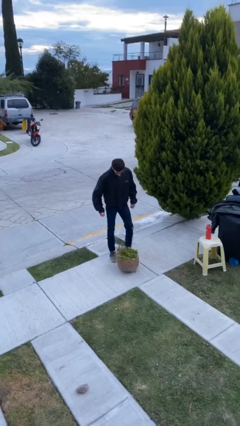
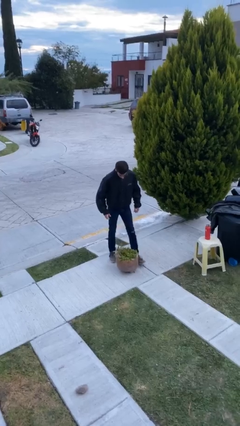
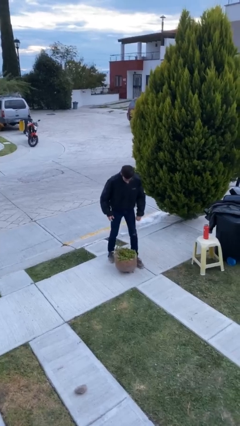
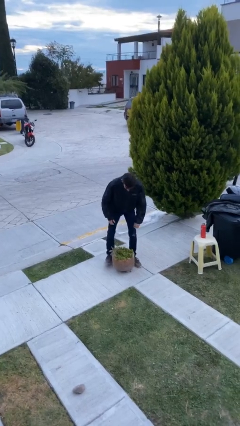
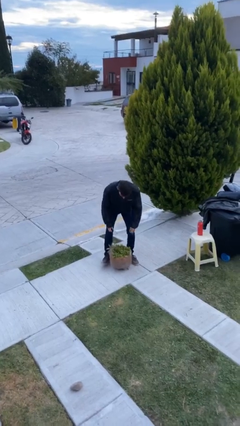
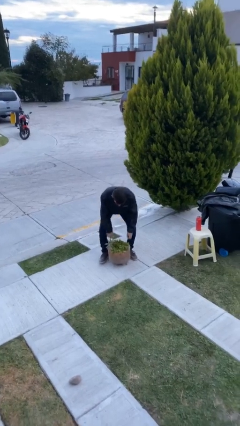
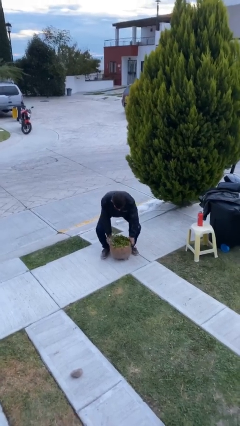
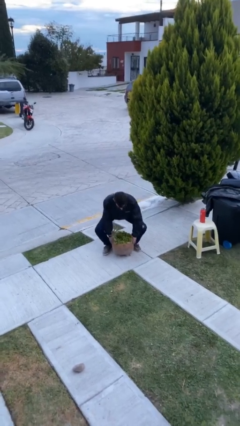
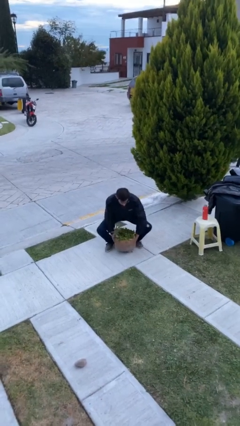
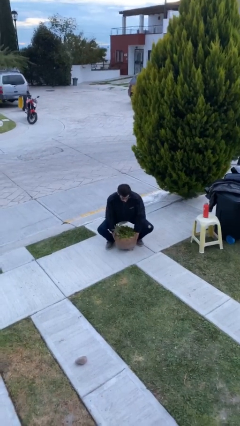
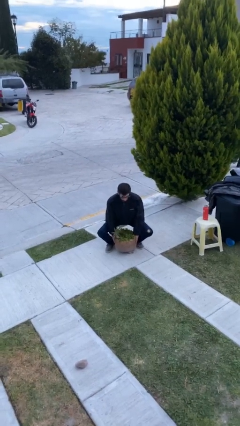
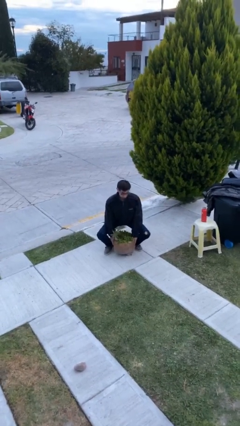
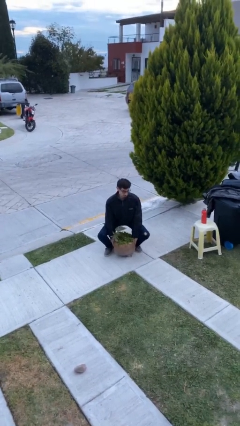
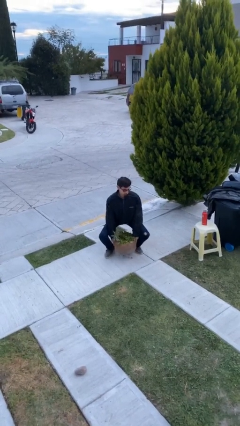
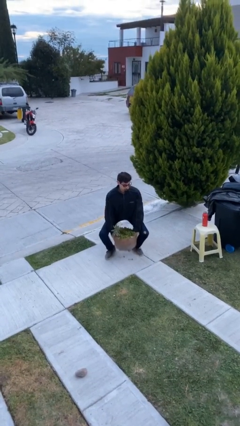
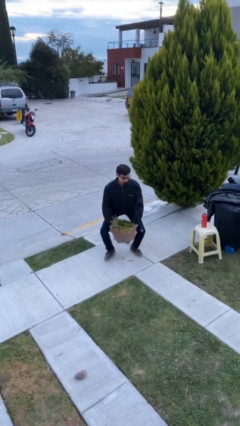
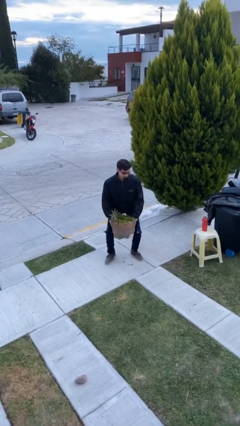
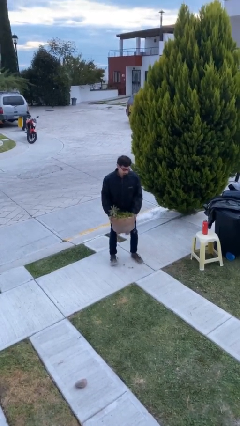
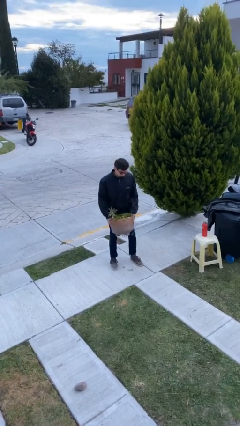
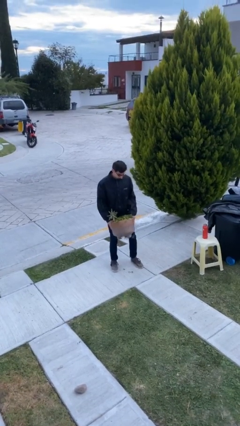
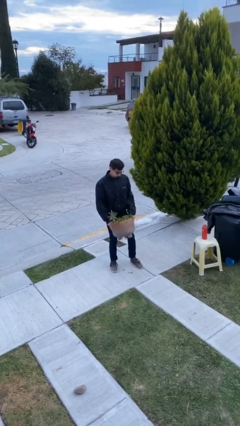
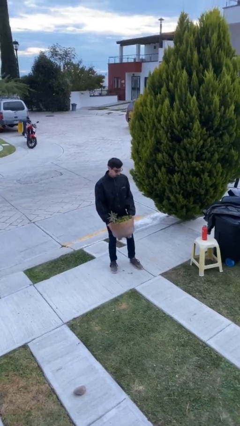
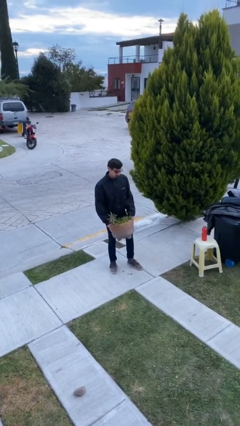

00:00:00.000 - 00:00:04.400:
person picks up object from floor

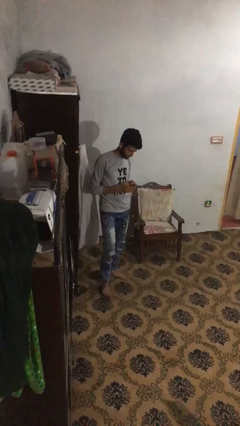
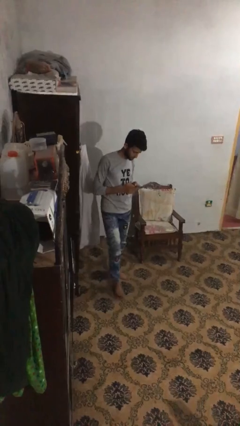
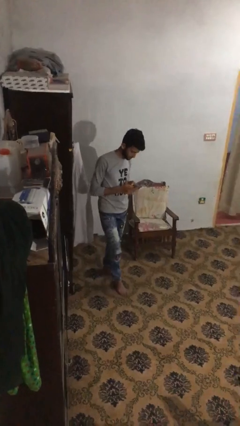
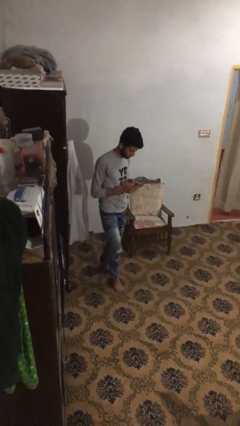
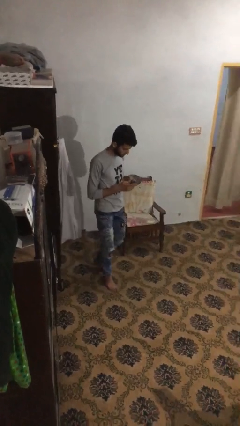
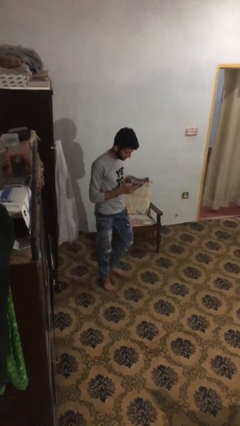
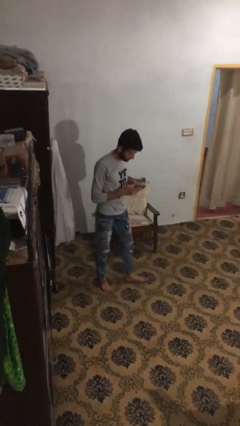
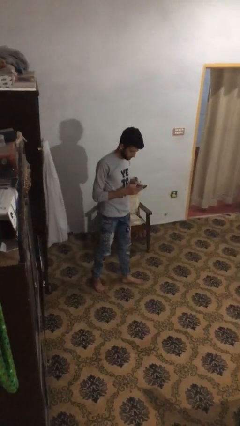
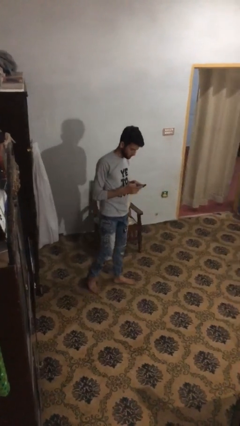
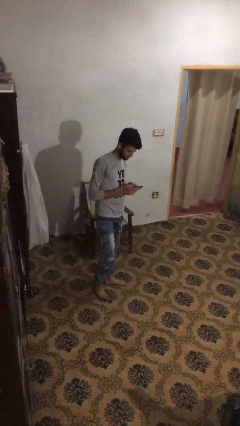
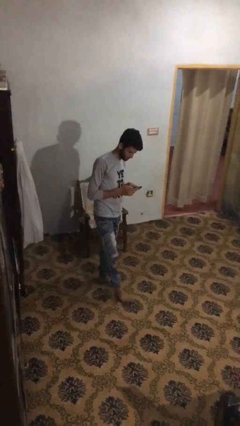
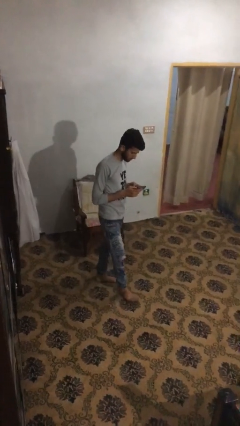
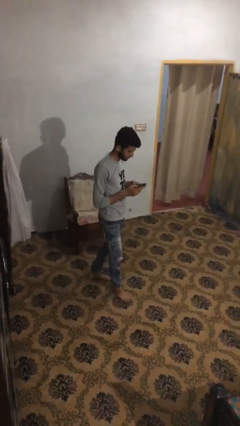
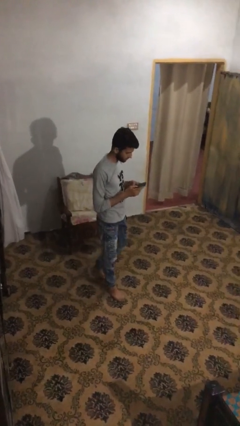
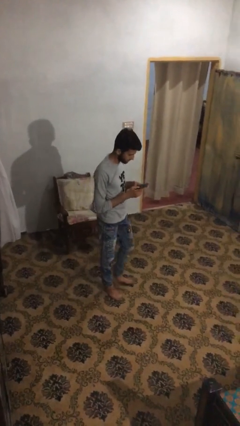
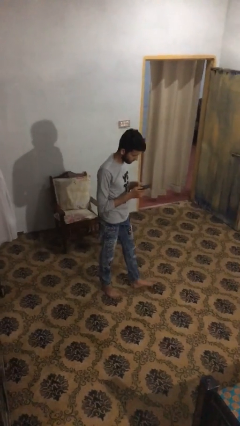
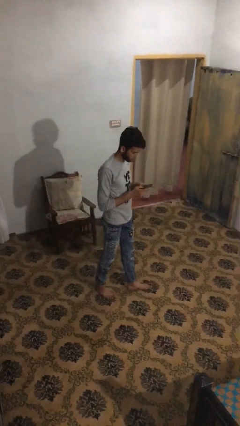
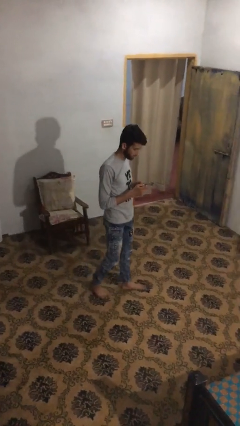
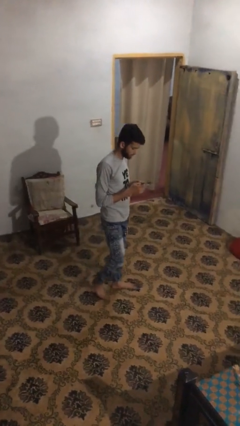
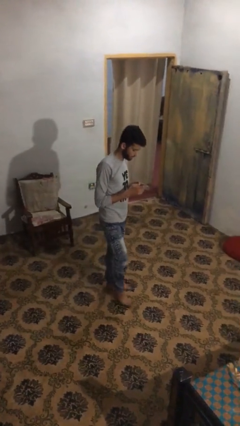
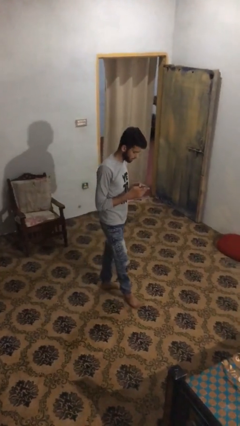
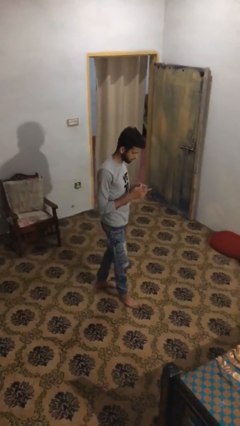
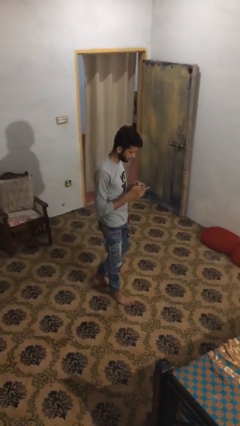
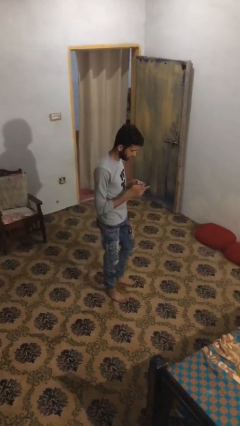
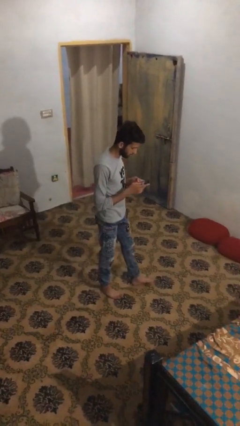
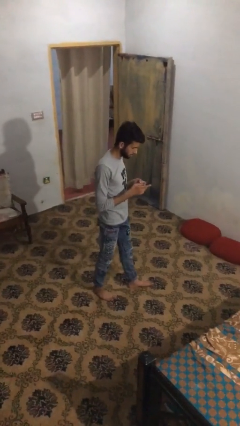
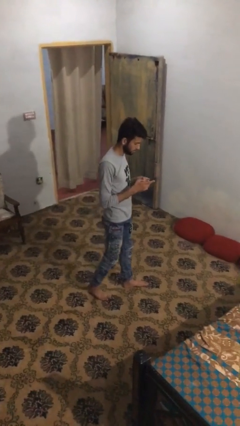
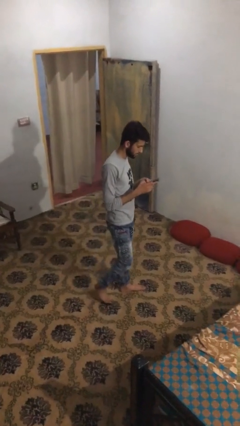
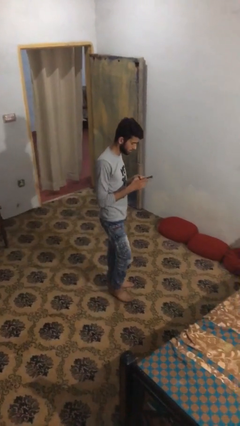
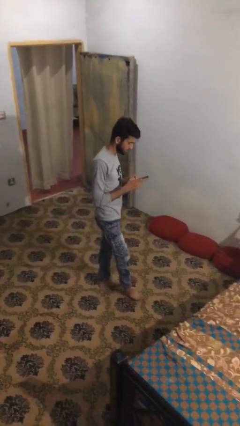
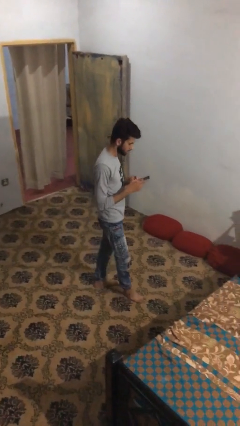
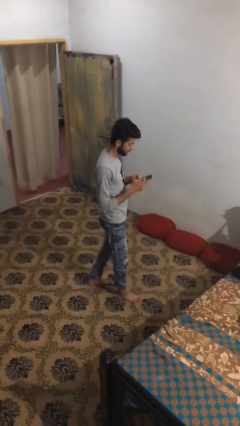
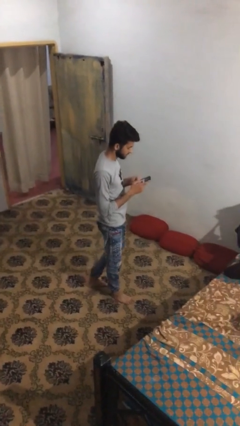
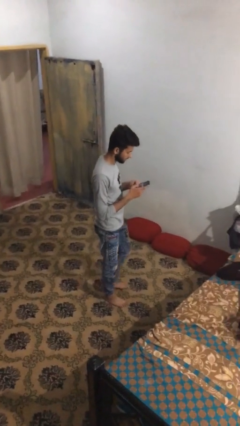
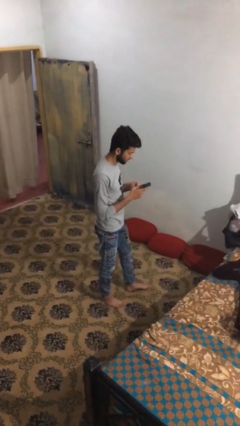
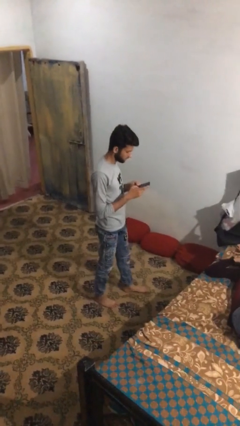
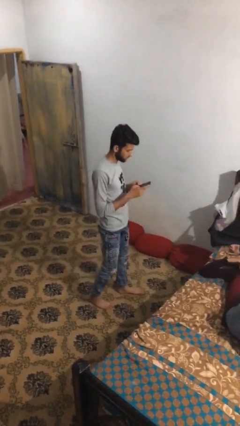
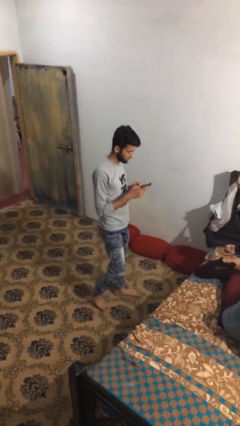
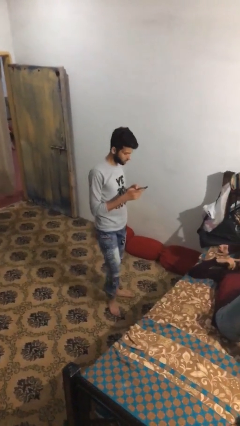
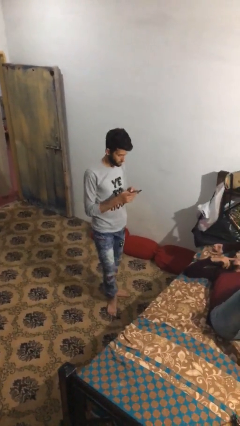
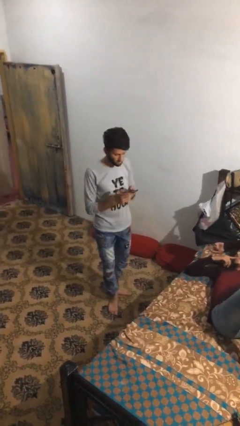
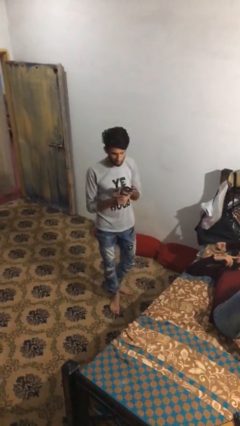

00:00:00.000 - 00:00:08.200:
person texts on phone

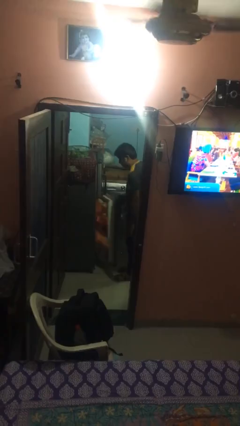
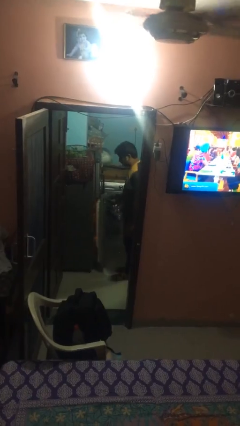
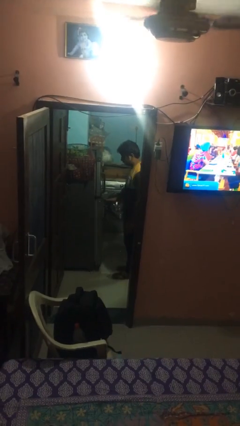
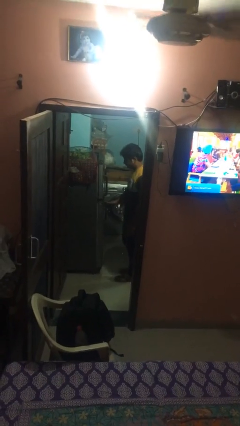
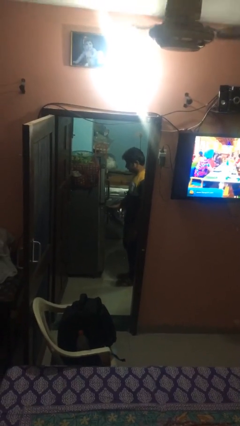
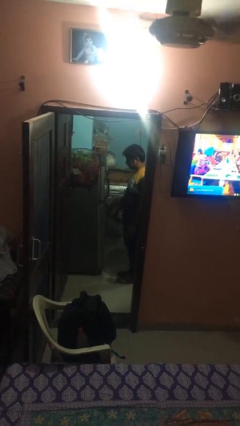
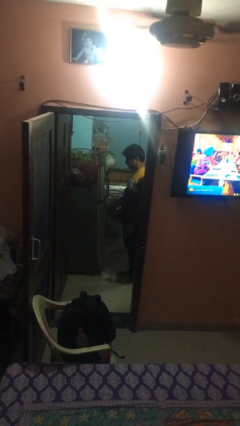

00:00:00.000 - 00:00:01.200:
person closes refrigerator

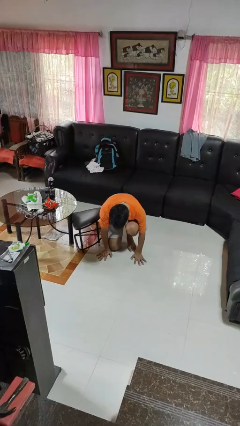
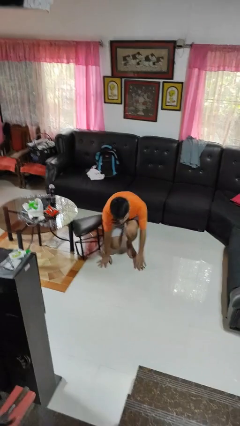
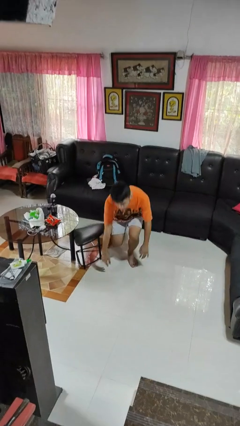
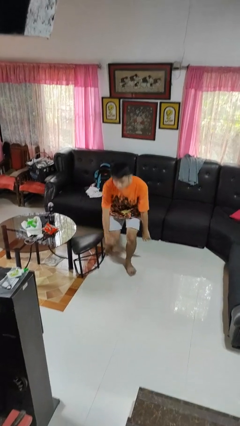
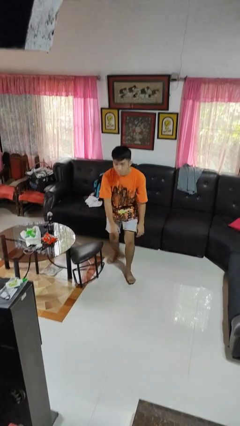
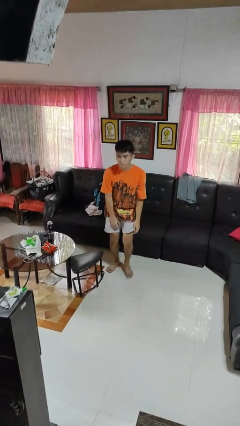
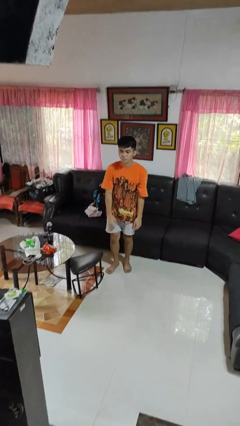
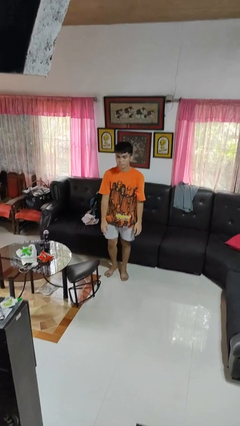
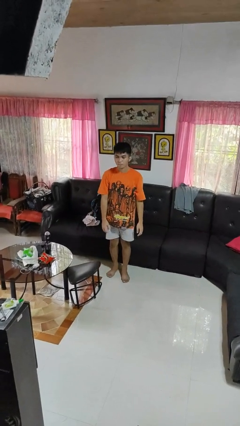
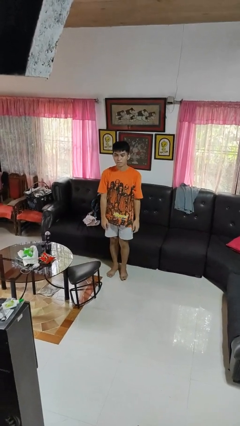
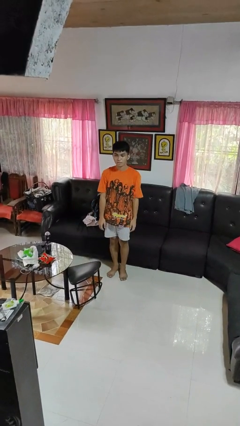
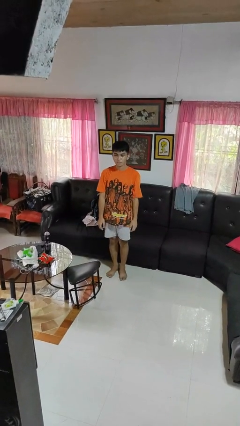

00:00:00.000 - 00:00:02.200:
person stands up from floor

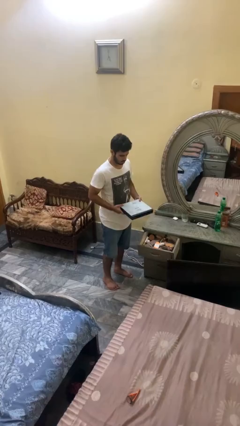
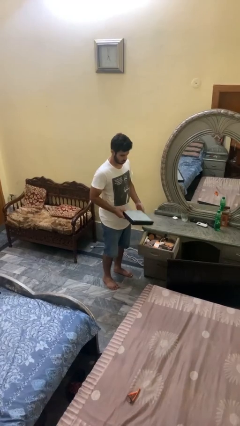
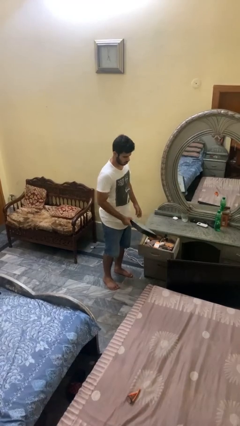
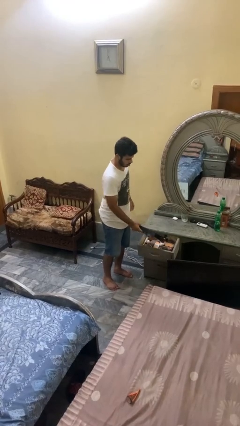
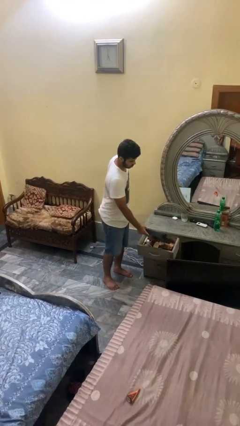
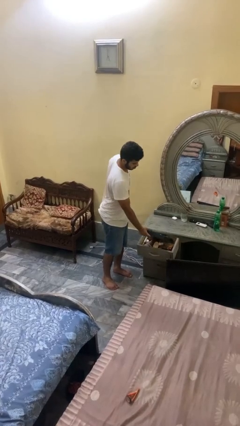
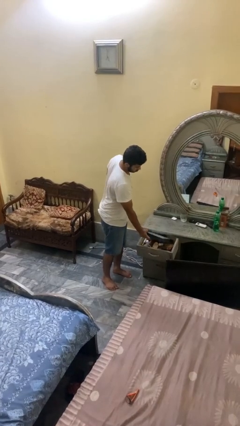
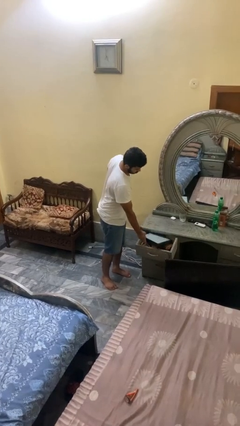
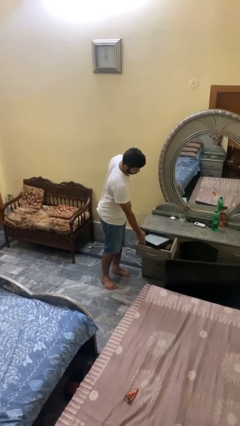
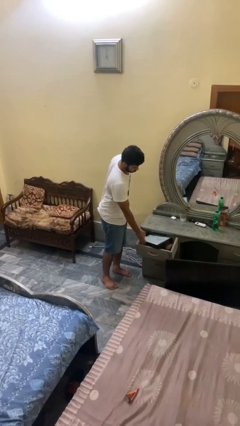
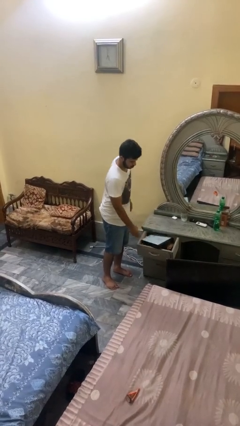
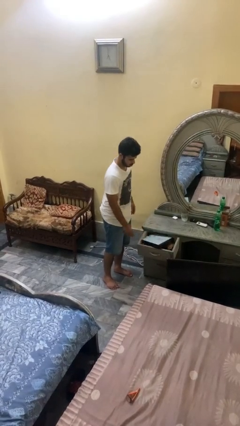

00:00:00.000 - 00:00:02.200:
person puts down object into cabinet
